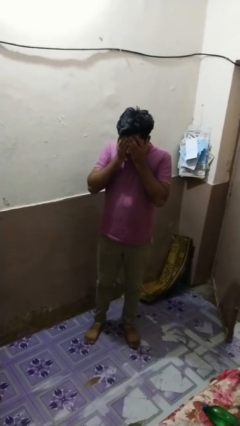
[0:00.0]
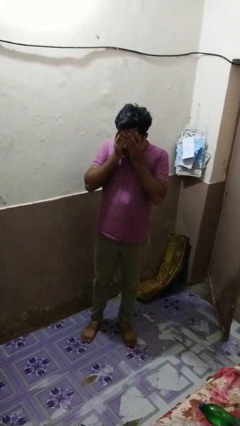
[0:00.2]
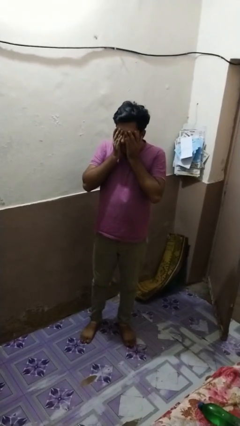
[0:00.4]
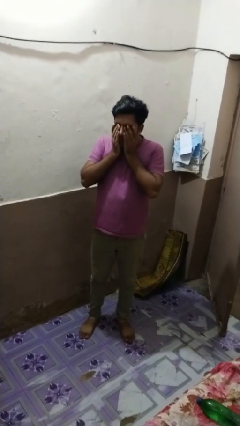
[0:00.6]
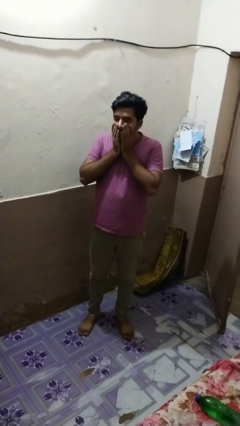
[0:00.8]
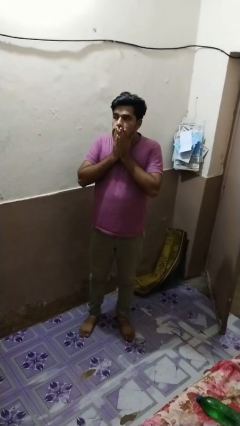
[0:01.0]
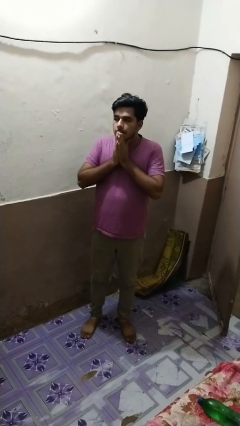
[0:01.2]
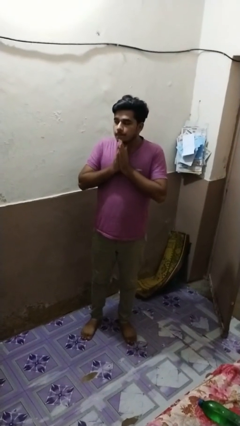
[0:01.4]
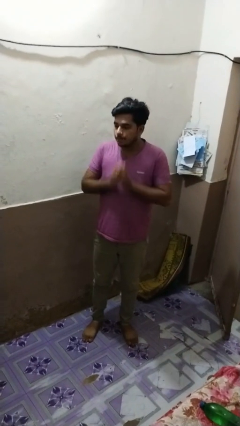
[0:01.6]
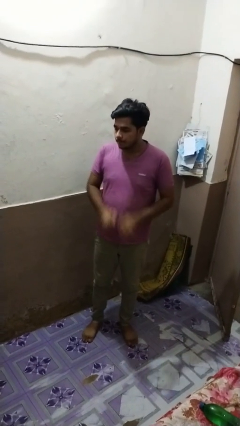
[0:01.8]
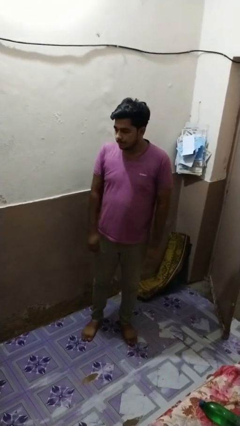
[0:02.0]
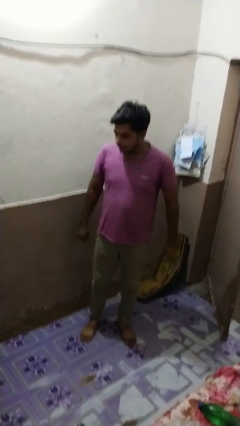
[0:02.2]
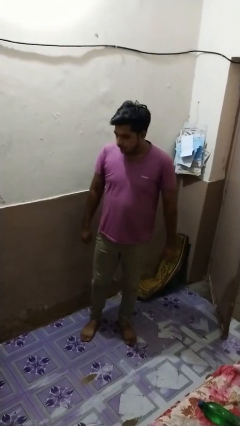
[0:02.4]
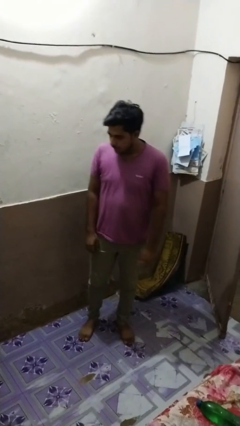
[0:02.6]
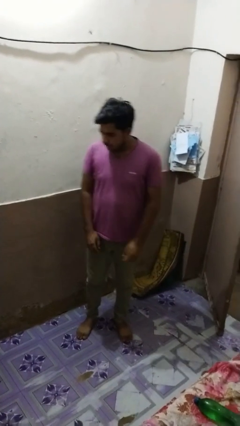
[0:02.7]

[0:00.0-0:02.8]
person covers face with hands

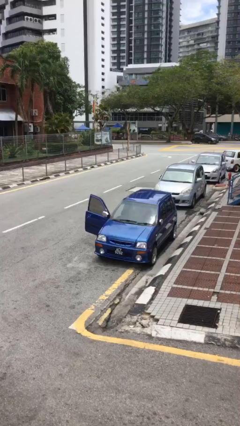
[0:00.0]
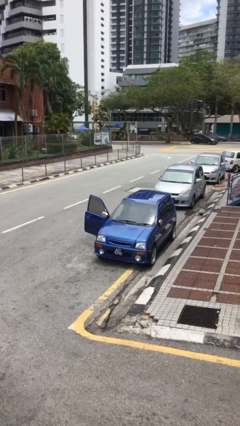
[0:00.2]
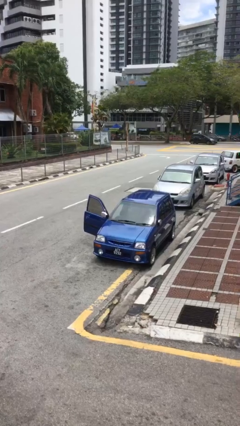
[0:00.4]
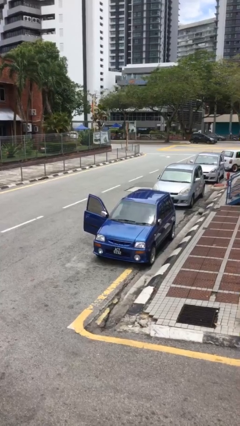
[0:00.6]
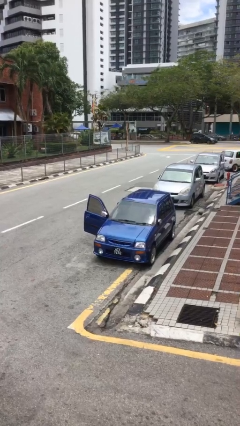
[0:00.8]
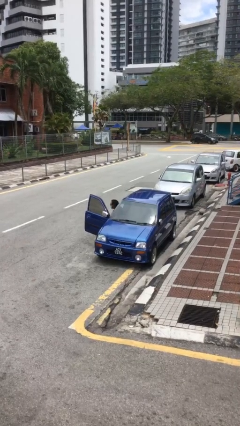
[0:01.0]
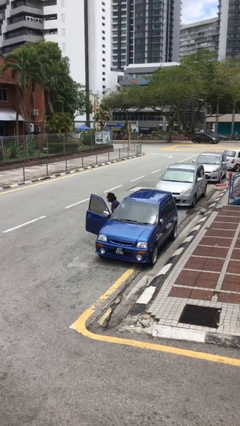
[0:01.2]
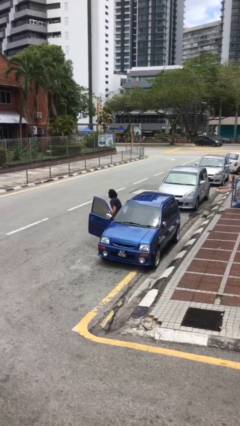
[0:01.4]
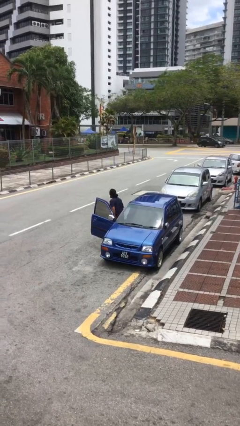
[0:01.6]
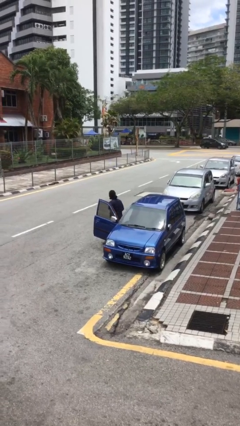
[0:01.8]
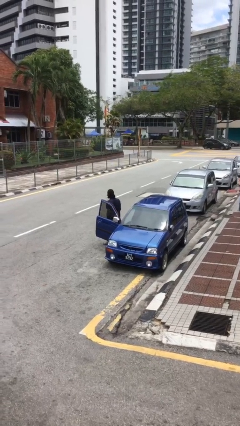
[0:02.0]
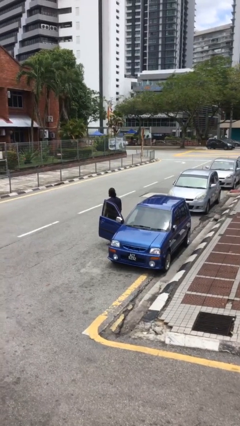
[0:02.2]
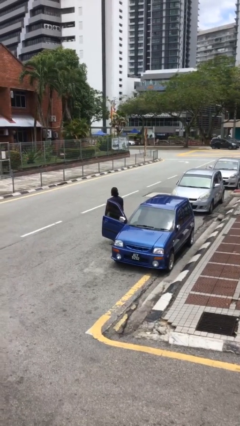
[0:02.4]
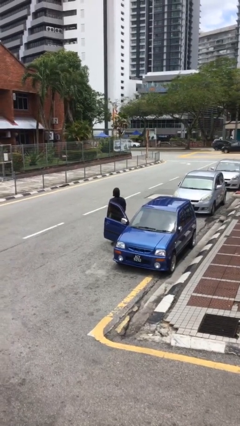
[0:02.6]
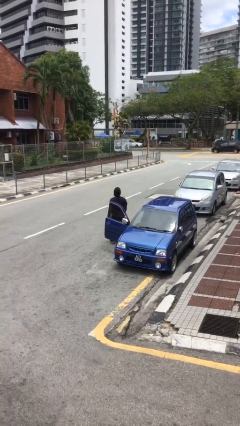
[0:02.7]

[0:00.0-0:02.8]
person exits car

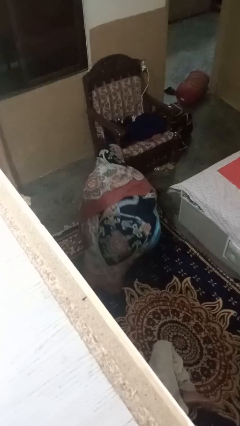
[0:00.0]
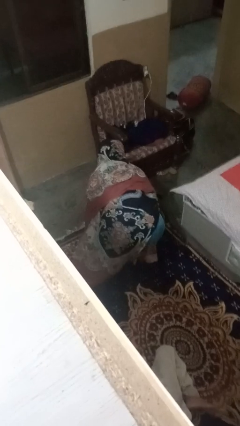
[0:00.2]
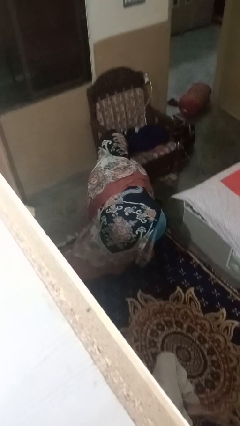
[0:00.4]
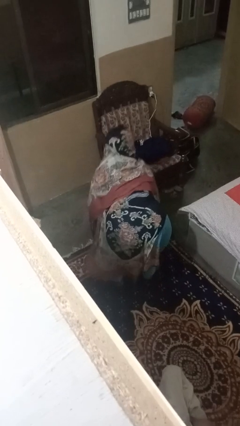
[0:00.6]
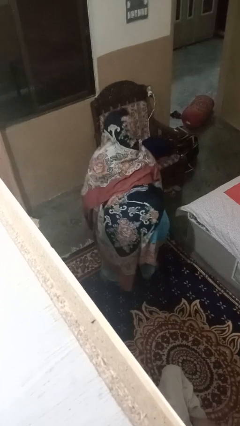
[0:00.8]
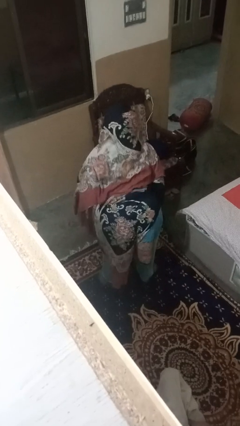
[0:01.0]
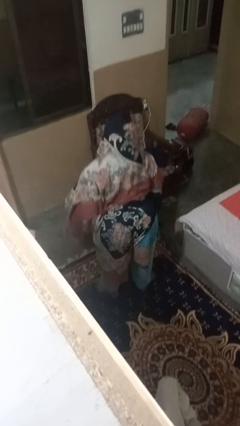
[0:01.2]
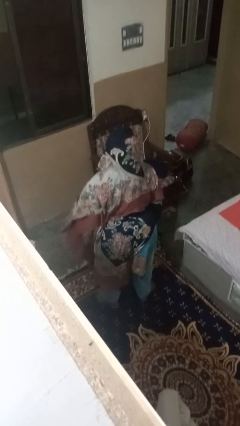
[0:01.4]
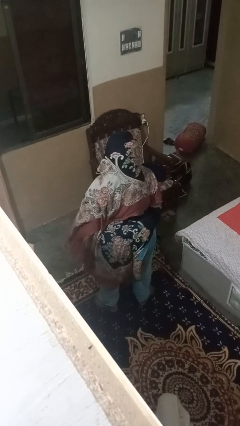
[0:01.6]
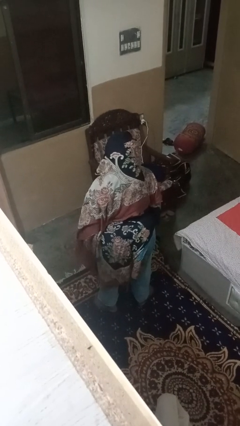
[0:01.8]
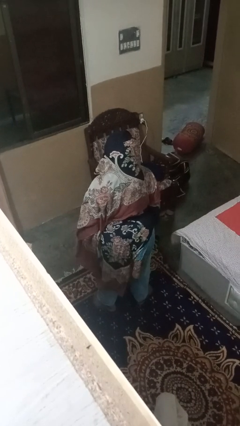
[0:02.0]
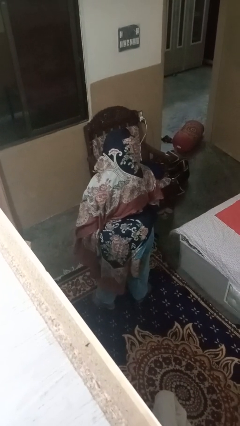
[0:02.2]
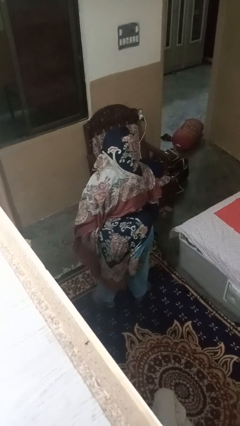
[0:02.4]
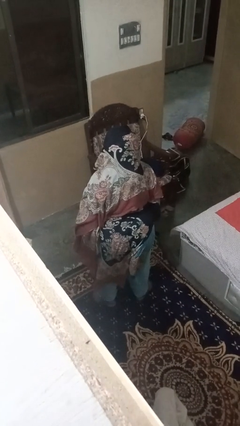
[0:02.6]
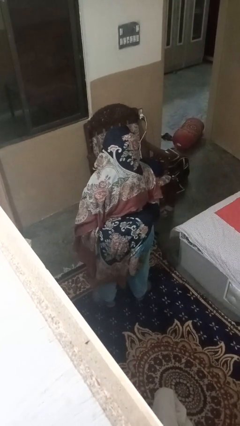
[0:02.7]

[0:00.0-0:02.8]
person stands up

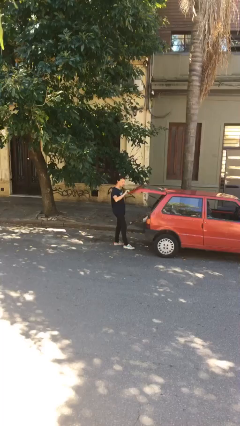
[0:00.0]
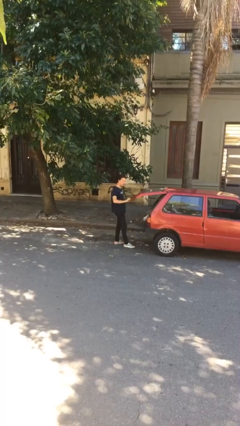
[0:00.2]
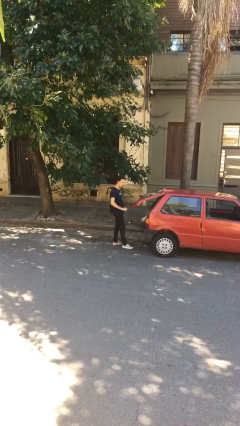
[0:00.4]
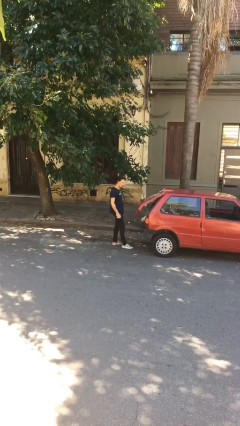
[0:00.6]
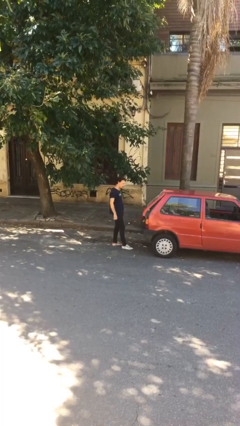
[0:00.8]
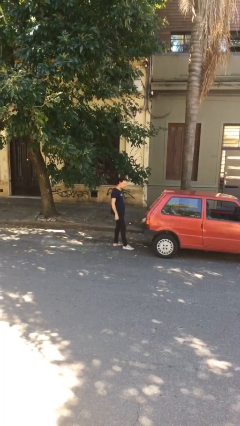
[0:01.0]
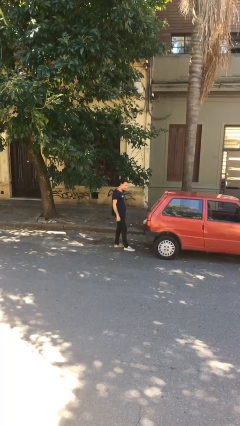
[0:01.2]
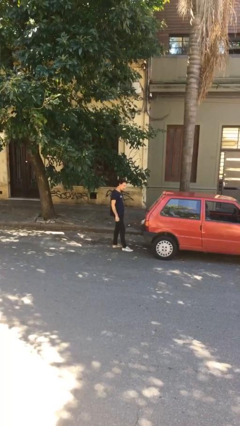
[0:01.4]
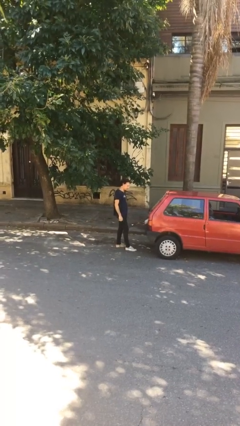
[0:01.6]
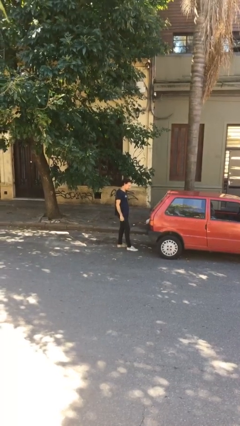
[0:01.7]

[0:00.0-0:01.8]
person closes car trunk

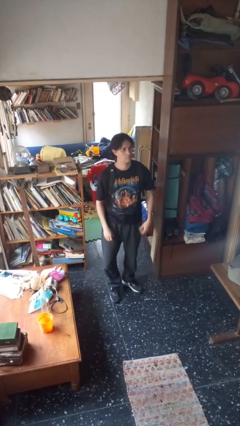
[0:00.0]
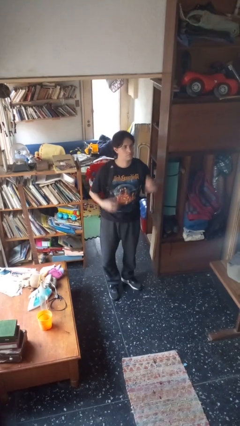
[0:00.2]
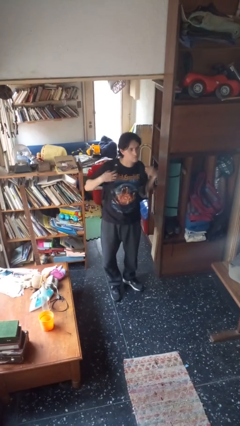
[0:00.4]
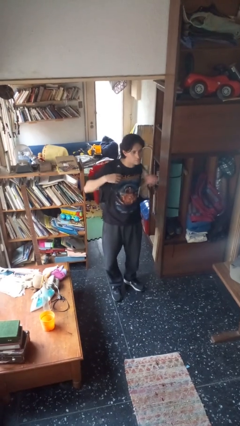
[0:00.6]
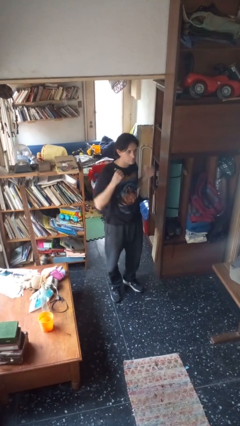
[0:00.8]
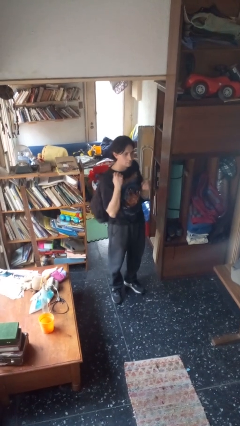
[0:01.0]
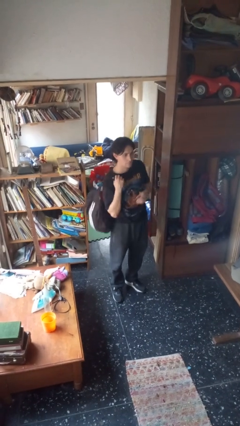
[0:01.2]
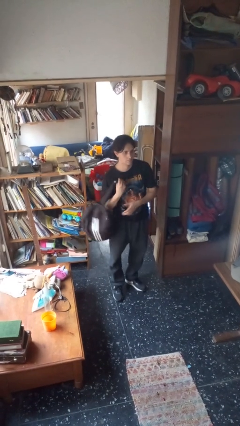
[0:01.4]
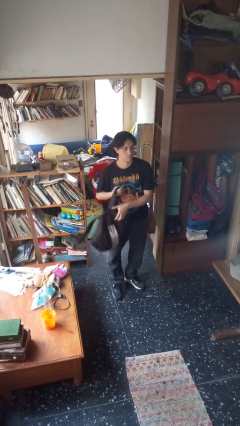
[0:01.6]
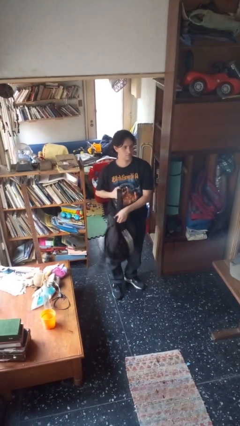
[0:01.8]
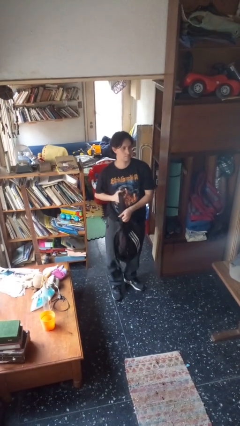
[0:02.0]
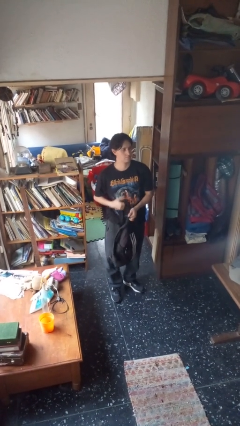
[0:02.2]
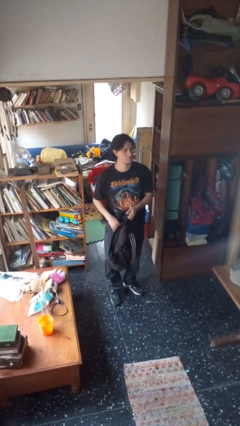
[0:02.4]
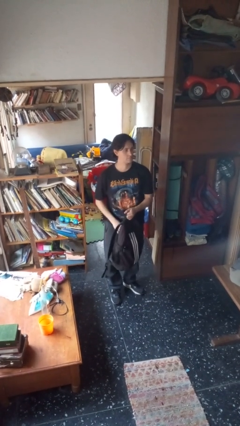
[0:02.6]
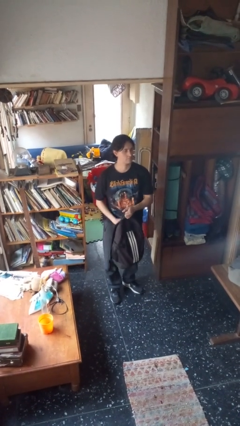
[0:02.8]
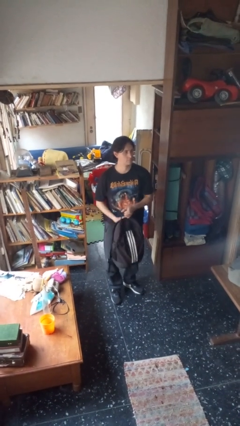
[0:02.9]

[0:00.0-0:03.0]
person takes off backpack

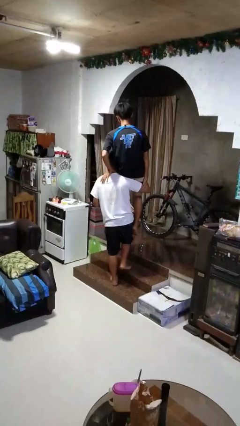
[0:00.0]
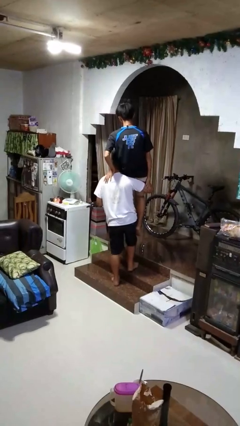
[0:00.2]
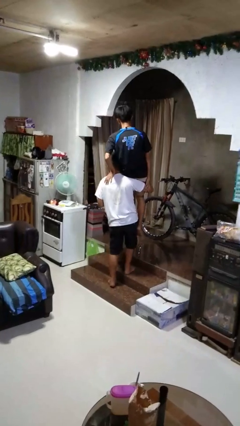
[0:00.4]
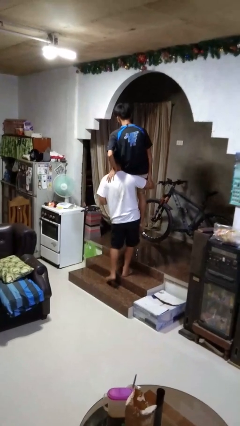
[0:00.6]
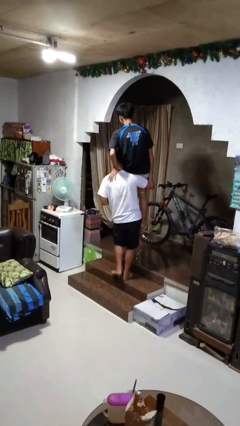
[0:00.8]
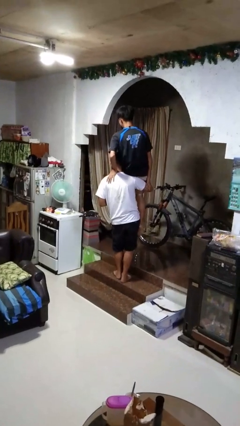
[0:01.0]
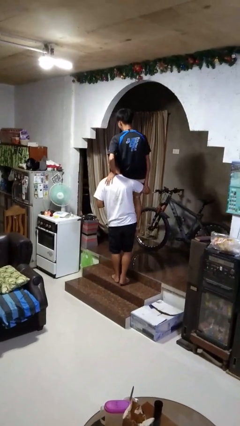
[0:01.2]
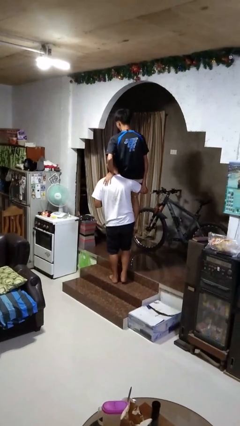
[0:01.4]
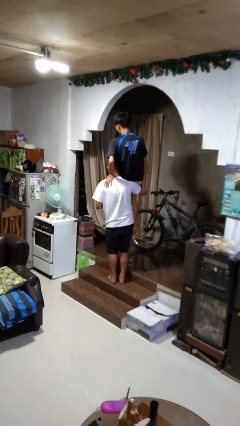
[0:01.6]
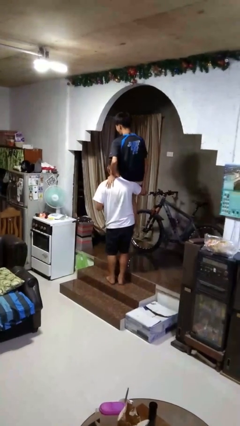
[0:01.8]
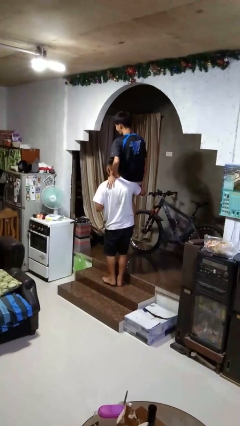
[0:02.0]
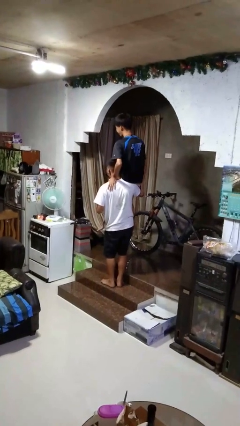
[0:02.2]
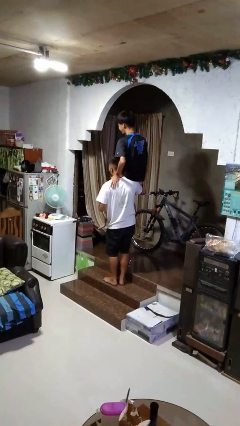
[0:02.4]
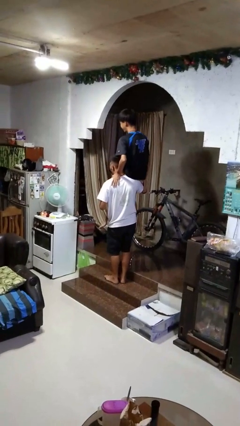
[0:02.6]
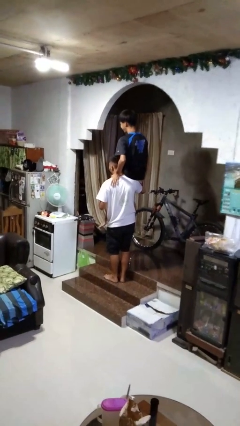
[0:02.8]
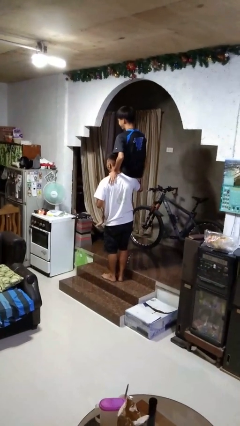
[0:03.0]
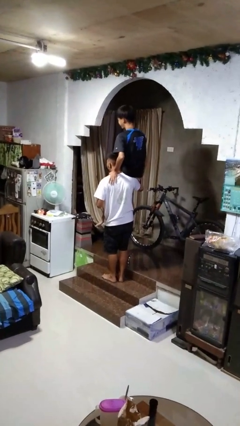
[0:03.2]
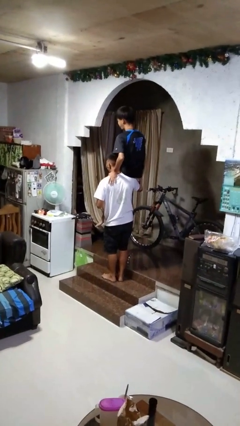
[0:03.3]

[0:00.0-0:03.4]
person carries person on shoulders

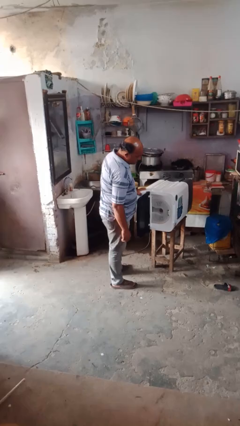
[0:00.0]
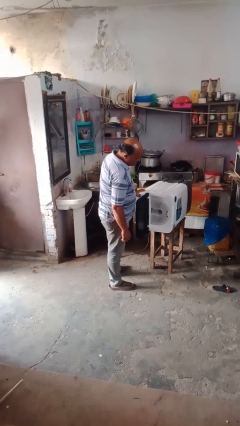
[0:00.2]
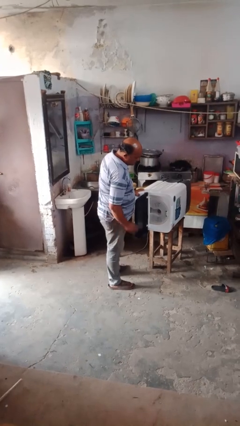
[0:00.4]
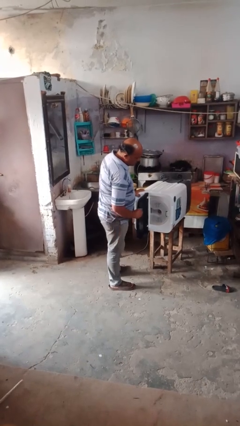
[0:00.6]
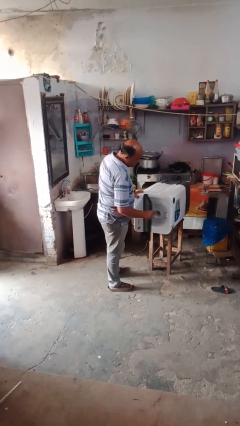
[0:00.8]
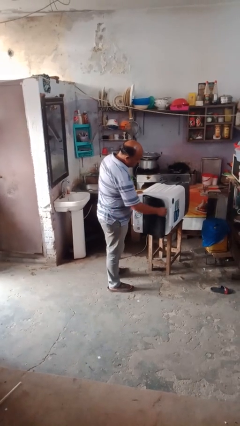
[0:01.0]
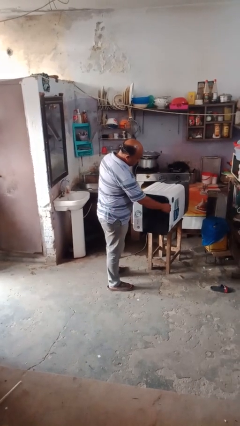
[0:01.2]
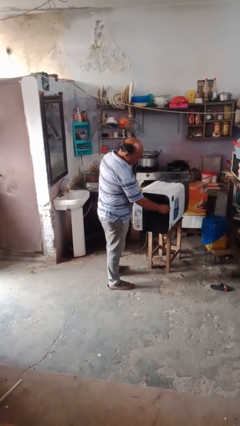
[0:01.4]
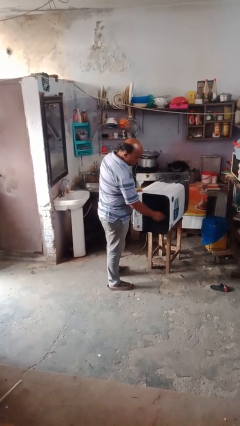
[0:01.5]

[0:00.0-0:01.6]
person closes dishwasher
